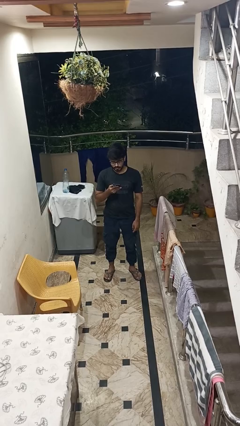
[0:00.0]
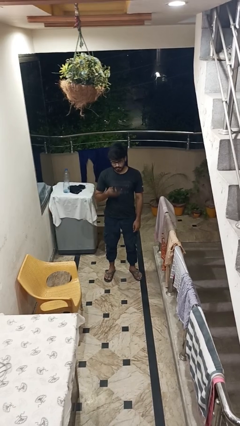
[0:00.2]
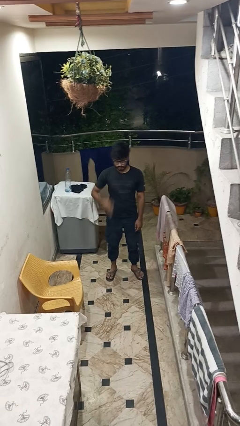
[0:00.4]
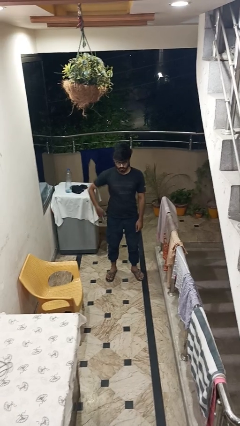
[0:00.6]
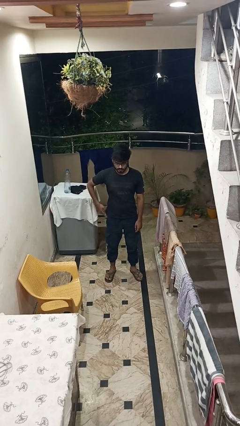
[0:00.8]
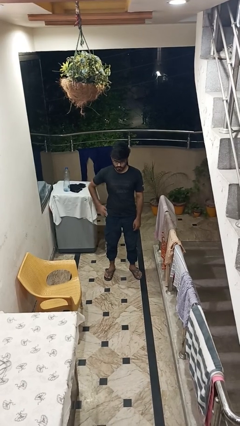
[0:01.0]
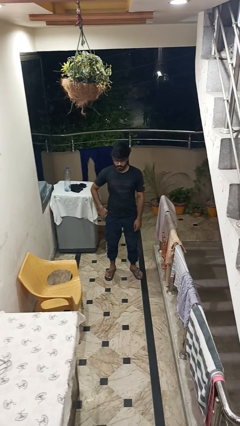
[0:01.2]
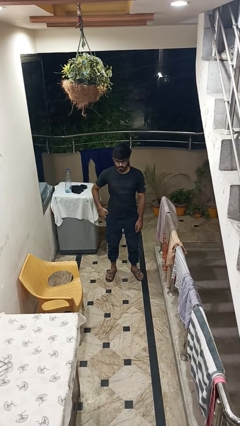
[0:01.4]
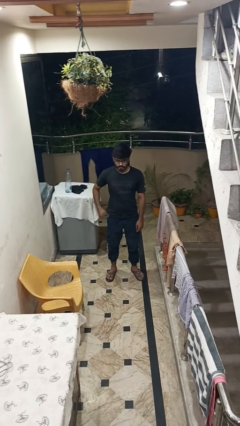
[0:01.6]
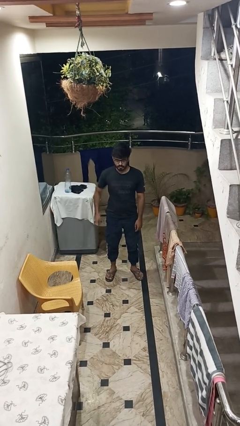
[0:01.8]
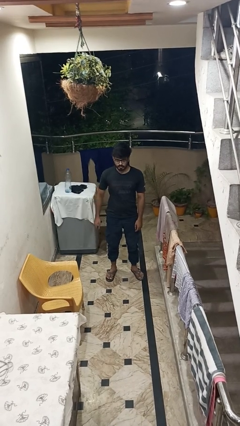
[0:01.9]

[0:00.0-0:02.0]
person puts phone into pocket

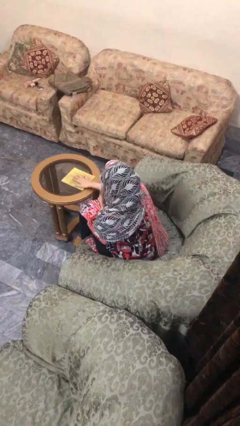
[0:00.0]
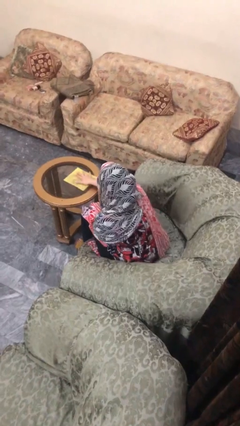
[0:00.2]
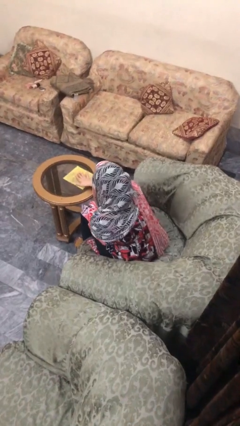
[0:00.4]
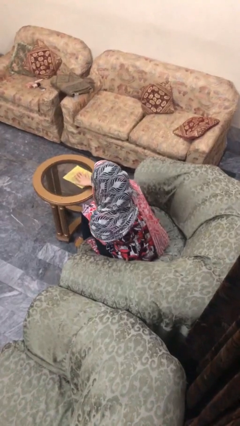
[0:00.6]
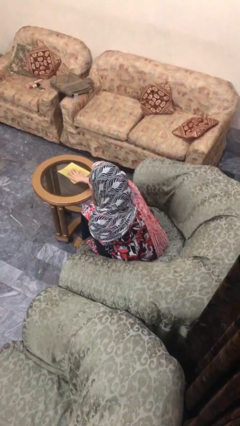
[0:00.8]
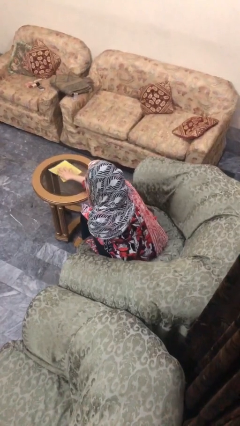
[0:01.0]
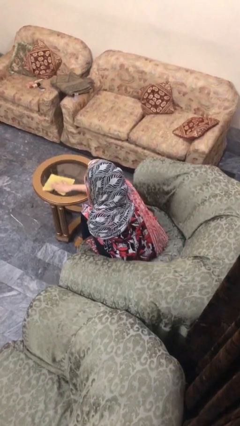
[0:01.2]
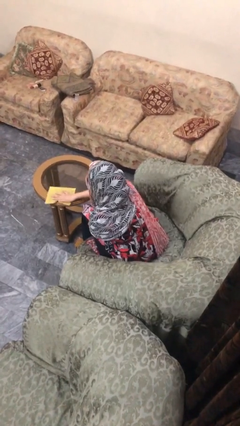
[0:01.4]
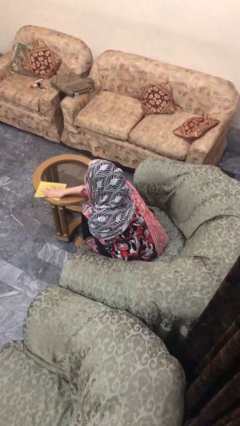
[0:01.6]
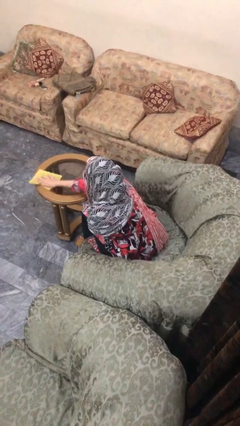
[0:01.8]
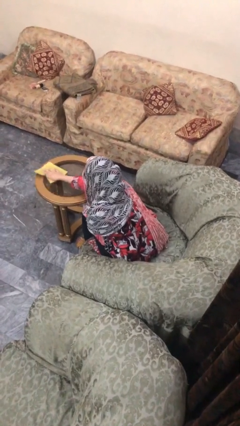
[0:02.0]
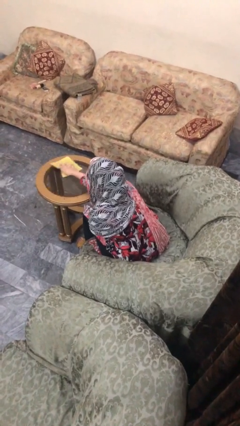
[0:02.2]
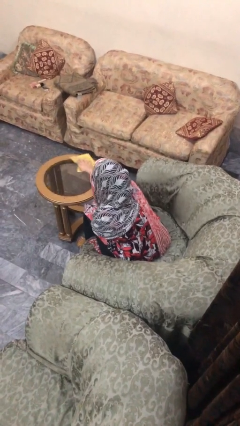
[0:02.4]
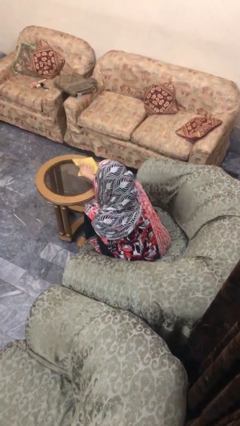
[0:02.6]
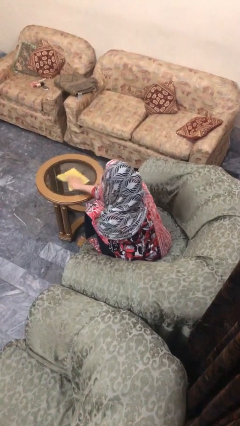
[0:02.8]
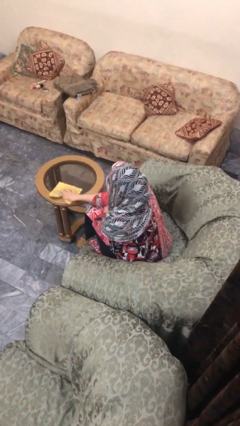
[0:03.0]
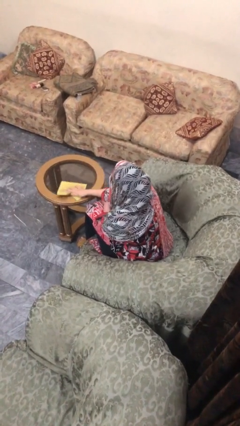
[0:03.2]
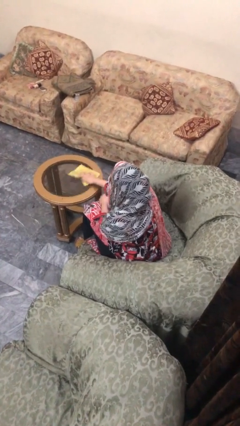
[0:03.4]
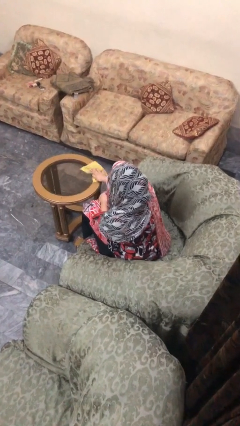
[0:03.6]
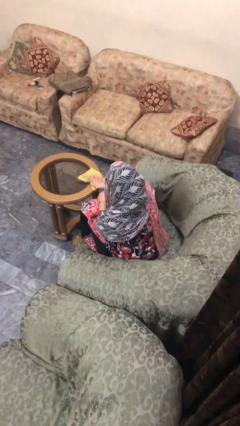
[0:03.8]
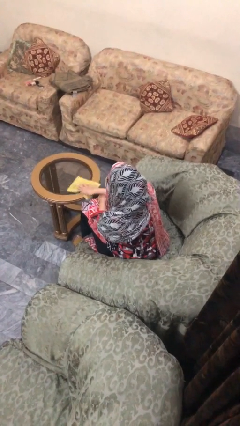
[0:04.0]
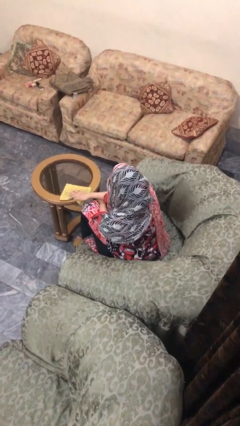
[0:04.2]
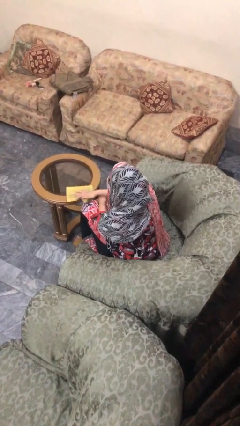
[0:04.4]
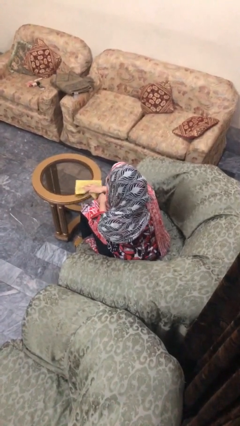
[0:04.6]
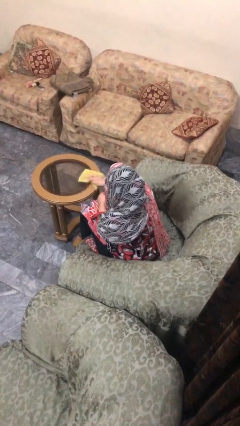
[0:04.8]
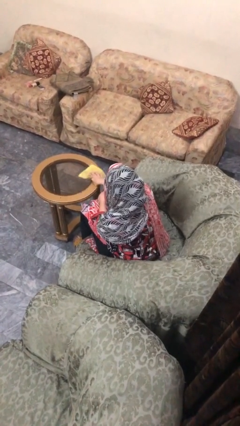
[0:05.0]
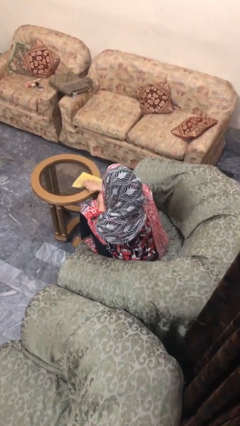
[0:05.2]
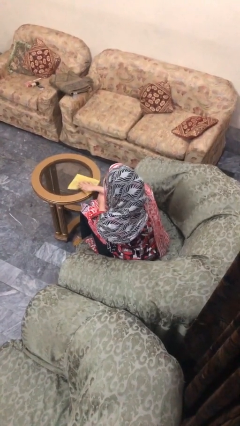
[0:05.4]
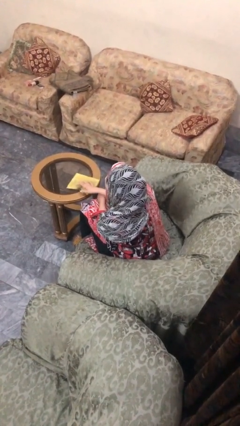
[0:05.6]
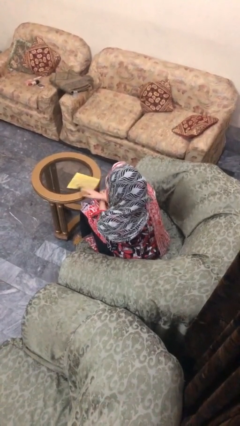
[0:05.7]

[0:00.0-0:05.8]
person cleans table with rag

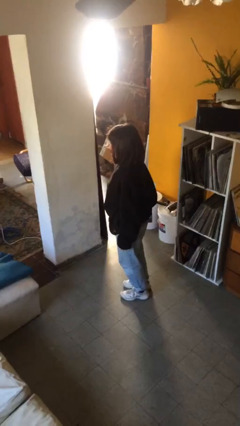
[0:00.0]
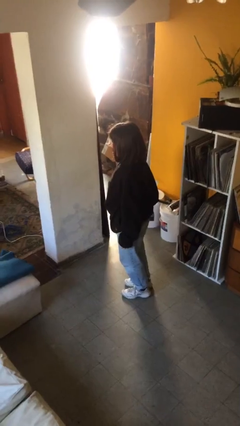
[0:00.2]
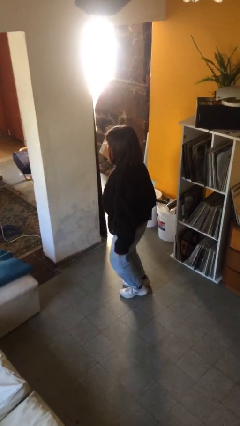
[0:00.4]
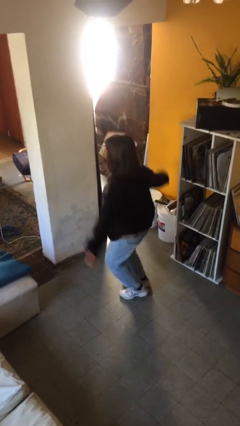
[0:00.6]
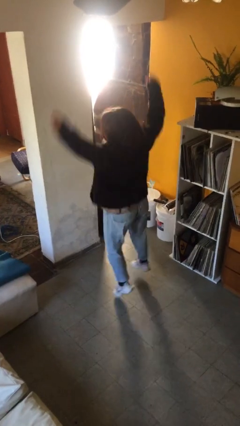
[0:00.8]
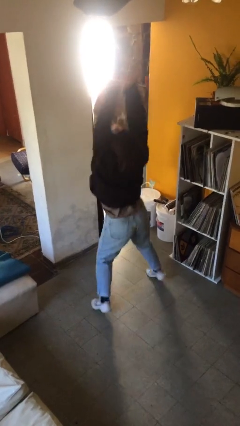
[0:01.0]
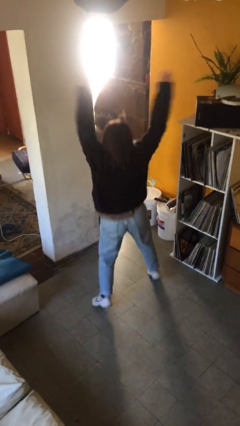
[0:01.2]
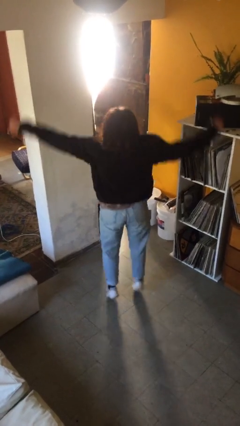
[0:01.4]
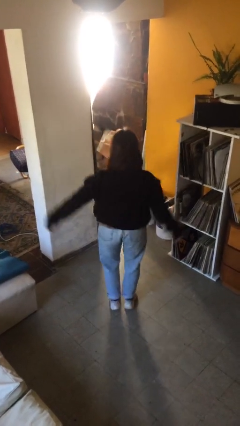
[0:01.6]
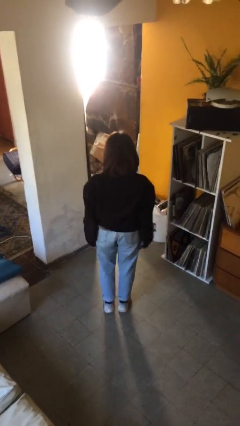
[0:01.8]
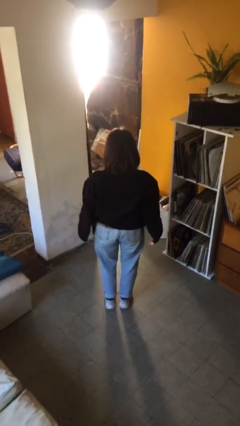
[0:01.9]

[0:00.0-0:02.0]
person exercises with jumping jacks

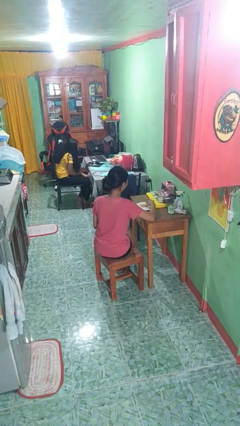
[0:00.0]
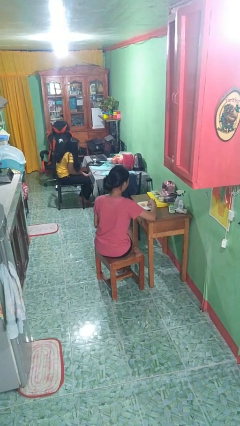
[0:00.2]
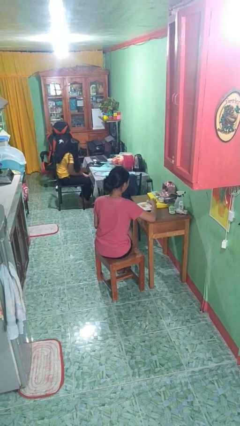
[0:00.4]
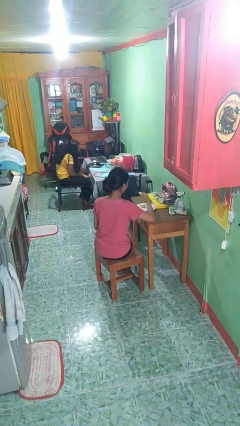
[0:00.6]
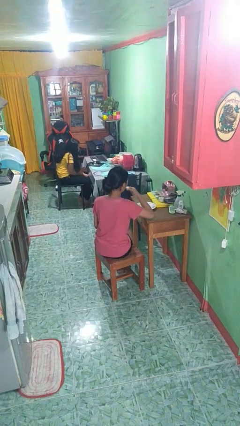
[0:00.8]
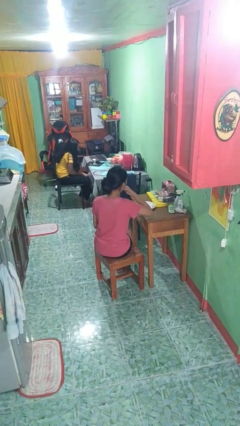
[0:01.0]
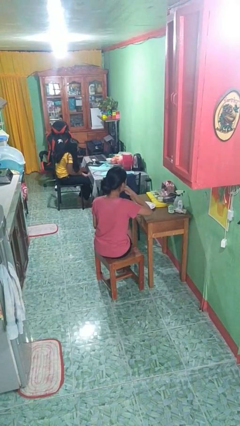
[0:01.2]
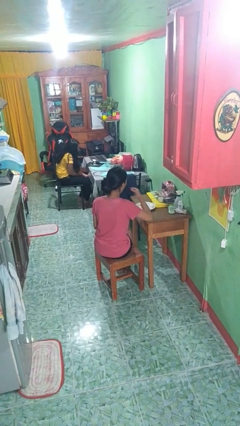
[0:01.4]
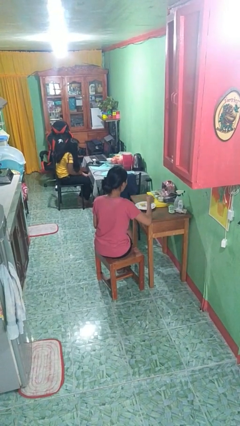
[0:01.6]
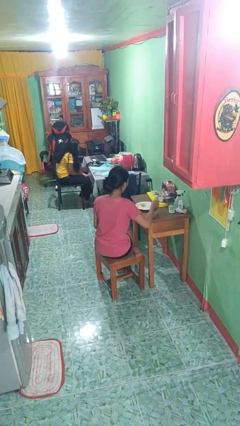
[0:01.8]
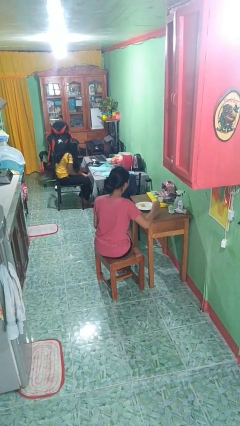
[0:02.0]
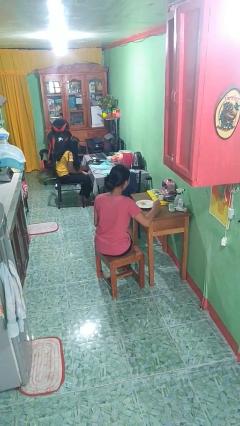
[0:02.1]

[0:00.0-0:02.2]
person eats with hands

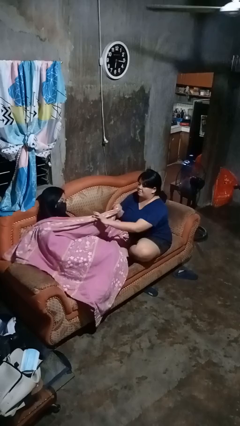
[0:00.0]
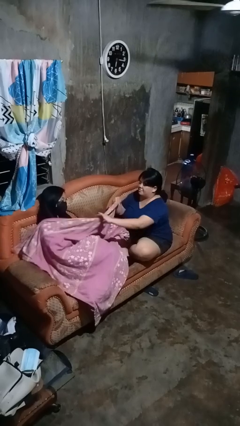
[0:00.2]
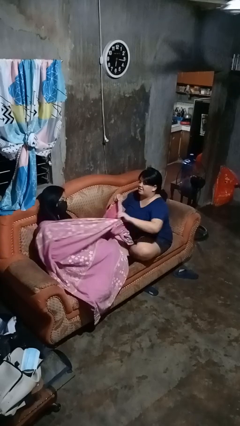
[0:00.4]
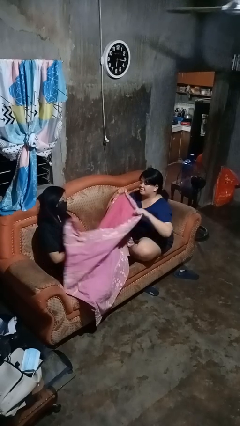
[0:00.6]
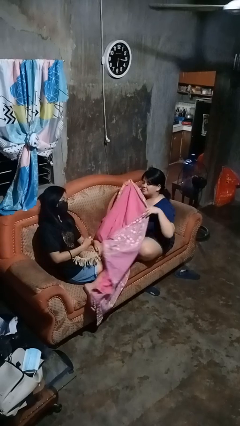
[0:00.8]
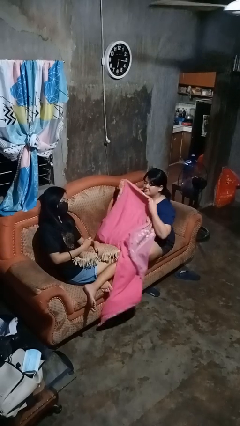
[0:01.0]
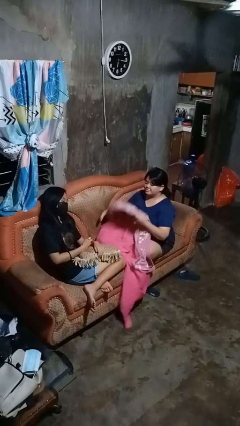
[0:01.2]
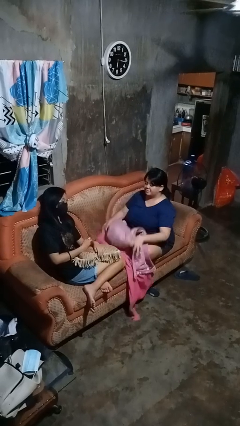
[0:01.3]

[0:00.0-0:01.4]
person uncovers friend with blanket

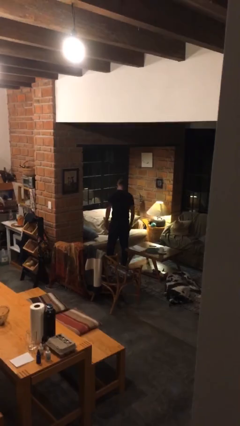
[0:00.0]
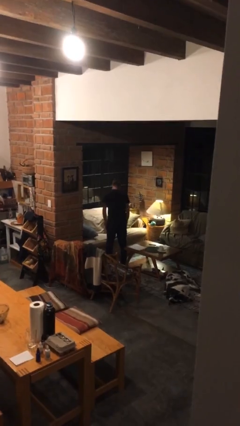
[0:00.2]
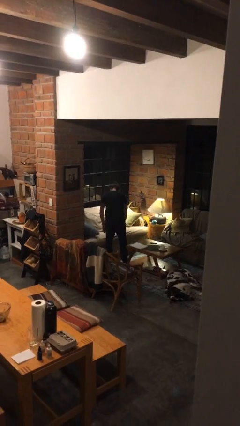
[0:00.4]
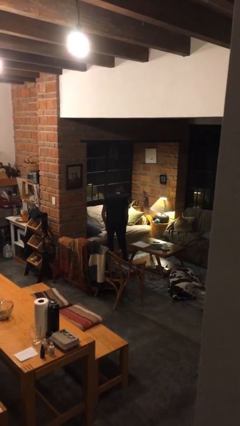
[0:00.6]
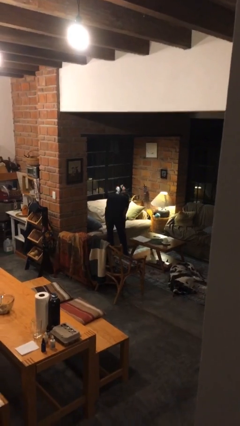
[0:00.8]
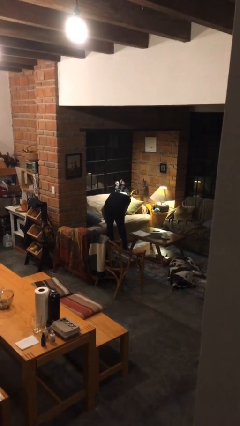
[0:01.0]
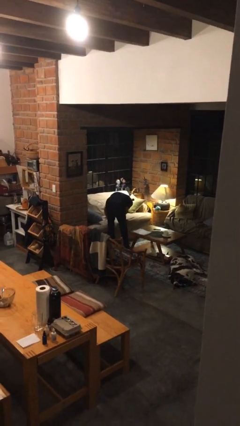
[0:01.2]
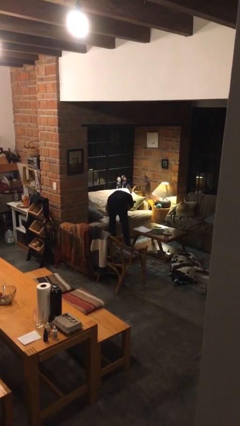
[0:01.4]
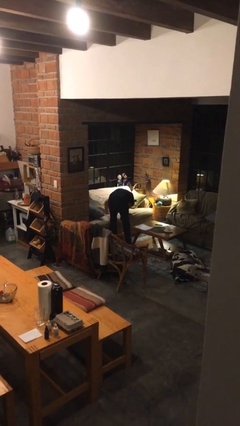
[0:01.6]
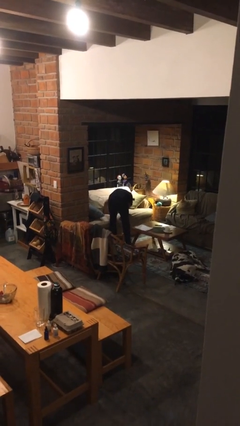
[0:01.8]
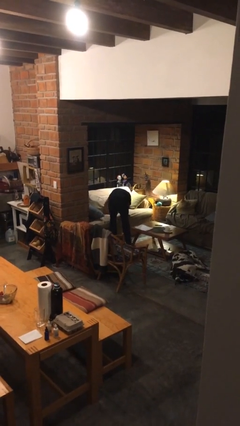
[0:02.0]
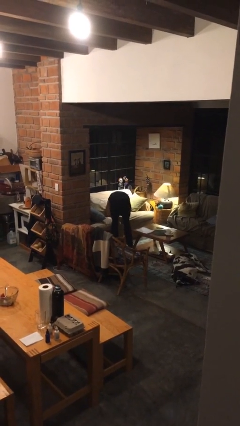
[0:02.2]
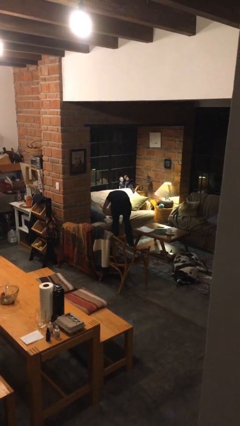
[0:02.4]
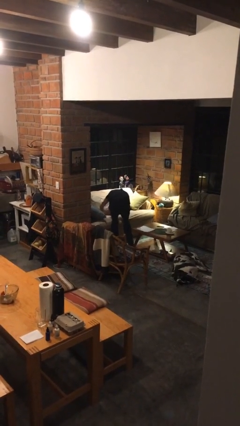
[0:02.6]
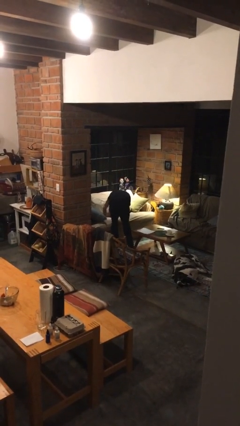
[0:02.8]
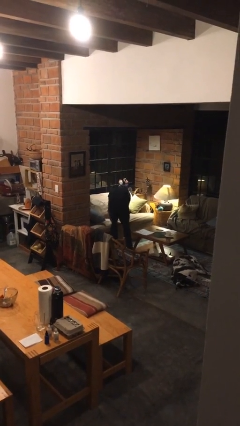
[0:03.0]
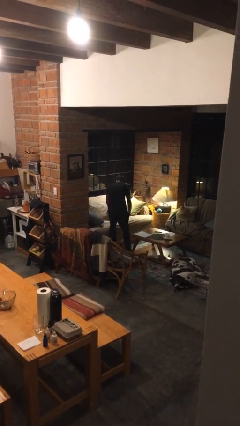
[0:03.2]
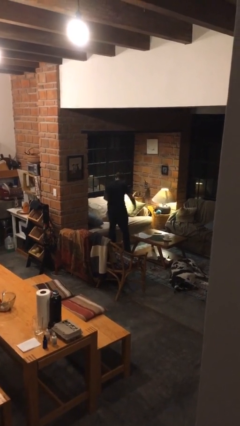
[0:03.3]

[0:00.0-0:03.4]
person searches in couch

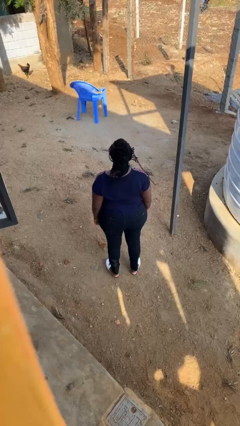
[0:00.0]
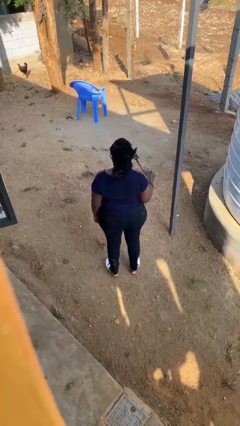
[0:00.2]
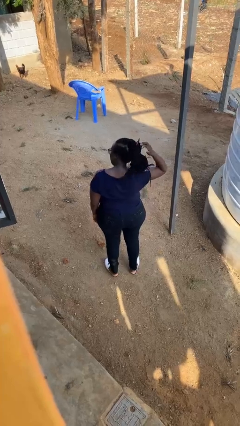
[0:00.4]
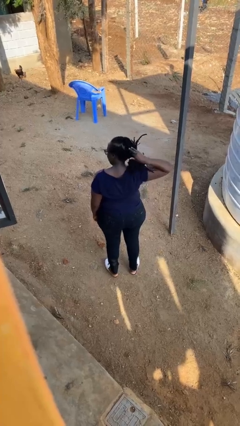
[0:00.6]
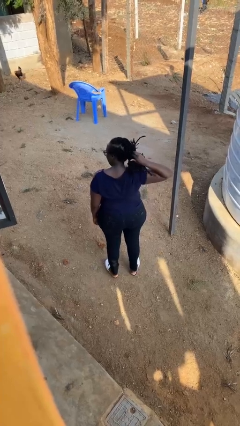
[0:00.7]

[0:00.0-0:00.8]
person takes off hairtie
